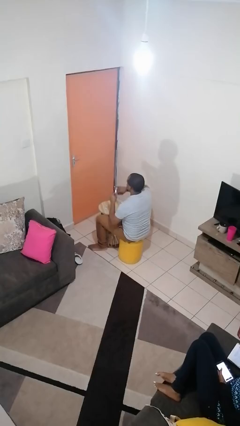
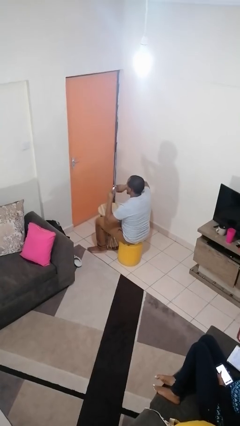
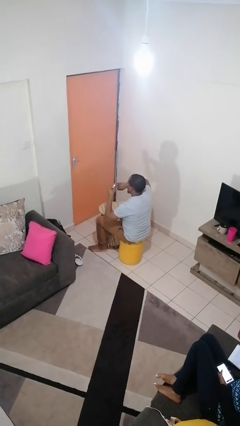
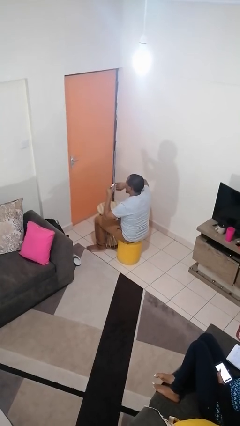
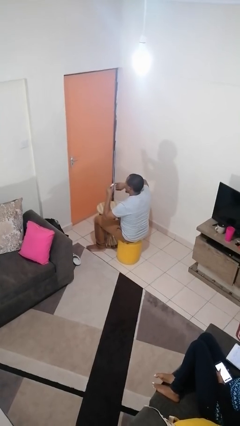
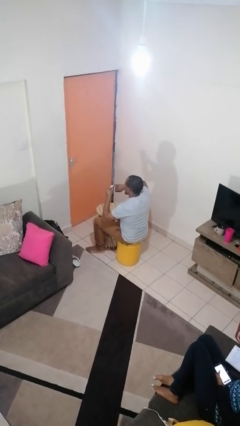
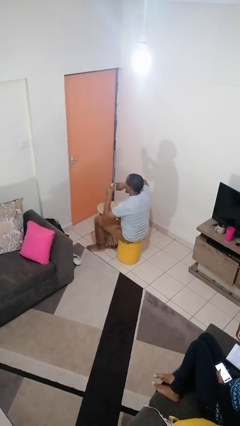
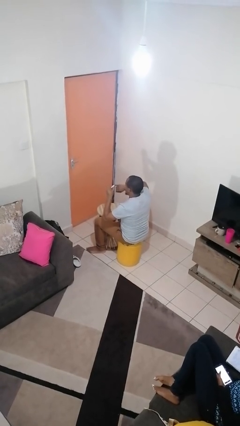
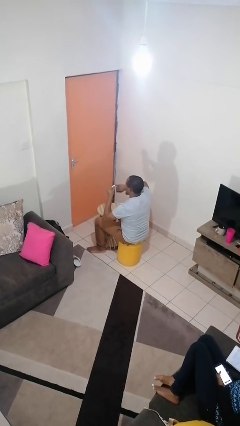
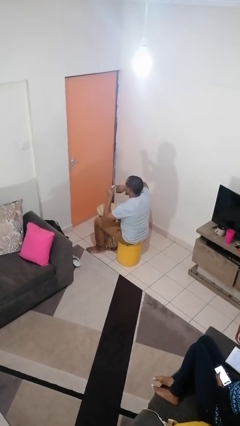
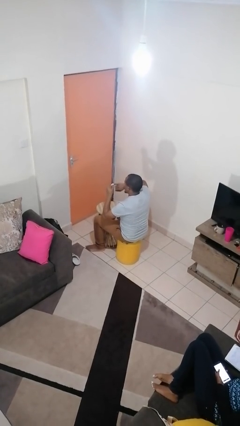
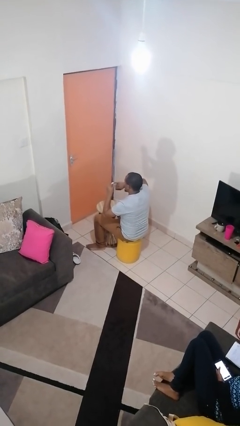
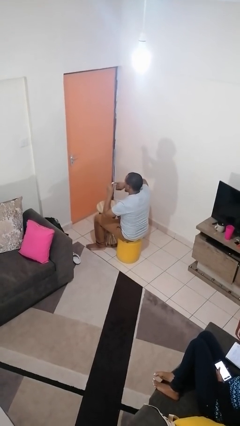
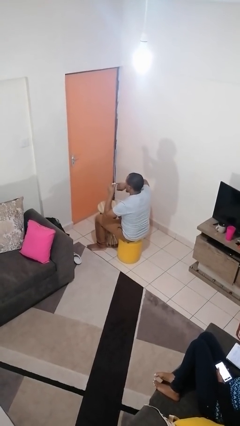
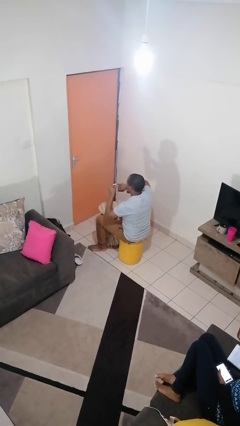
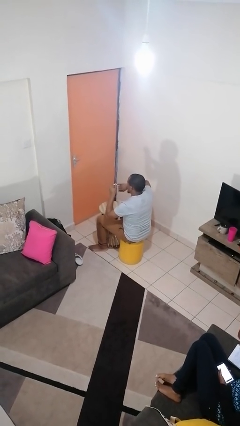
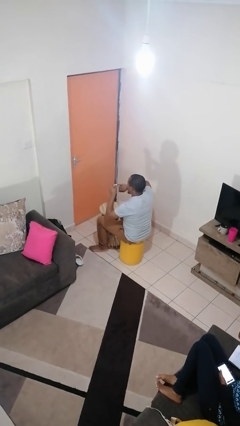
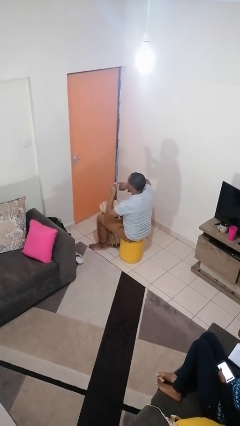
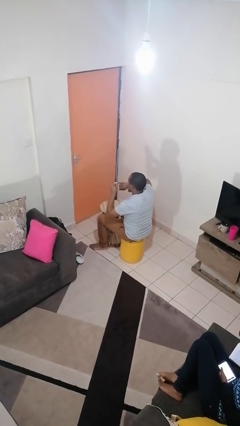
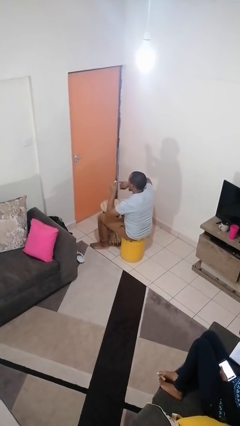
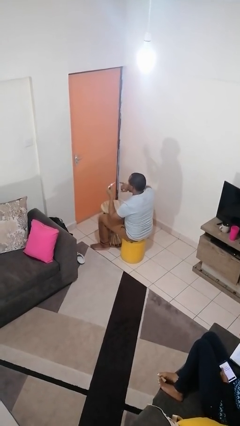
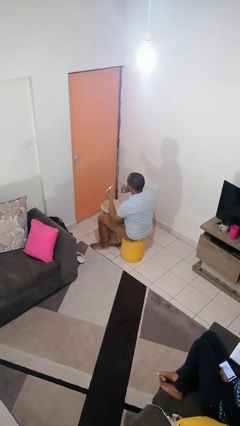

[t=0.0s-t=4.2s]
person paints fingernails

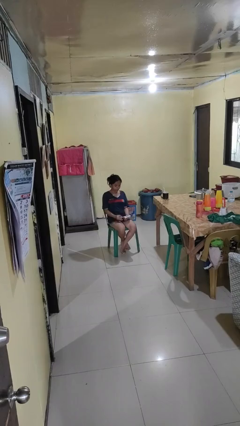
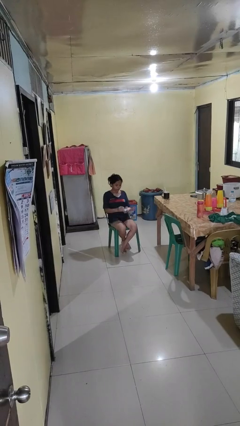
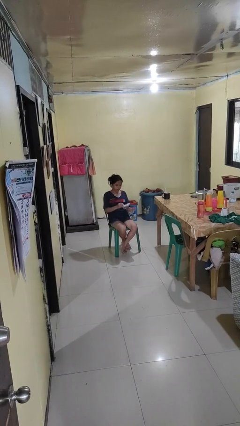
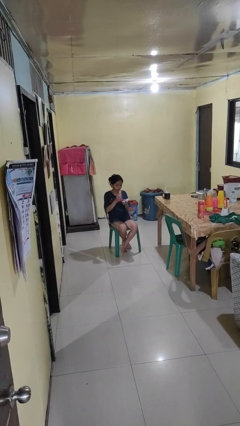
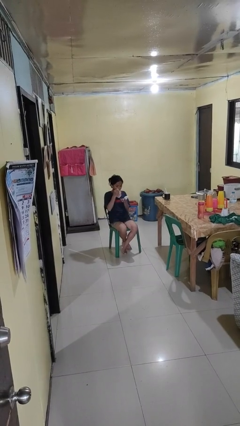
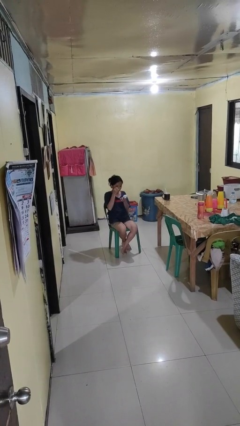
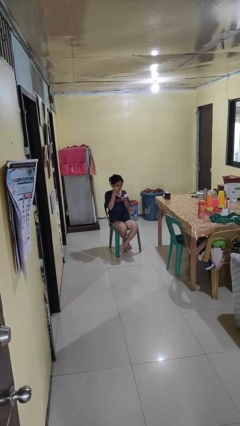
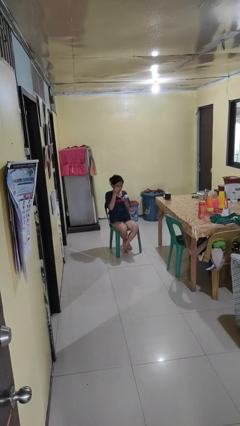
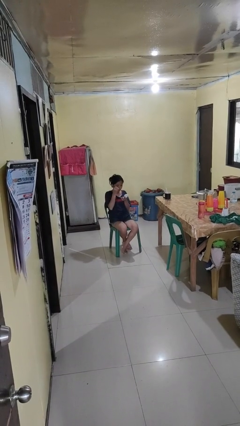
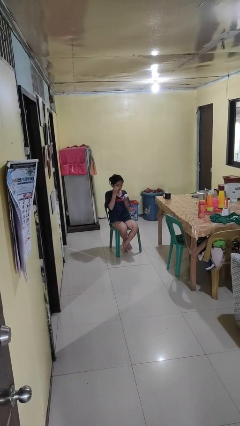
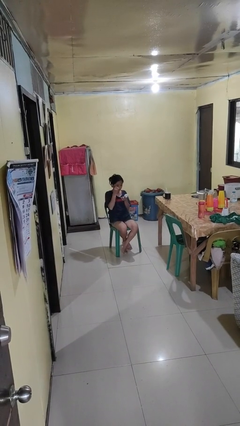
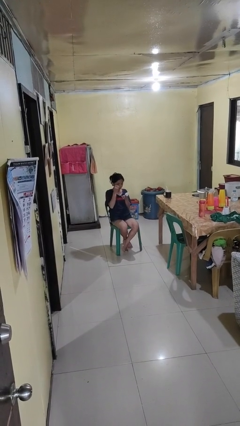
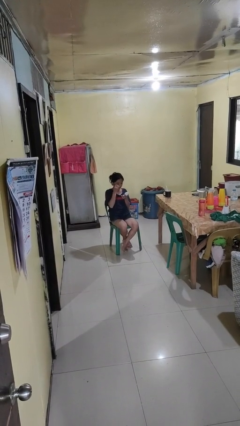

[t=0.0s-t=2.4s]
person applies eye makeup

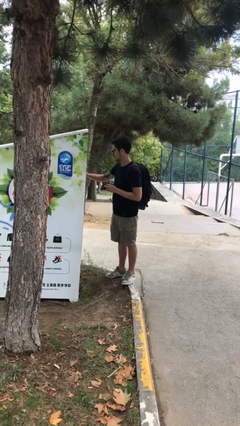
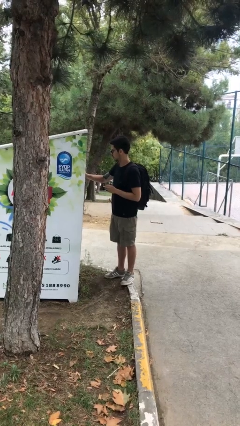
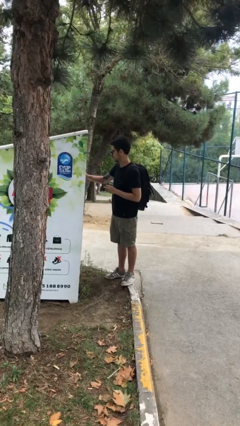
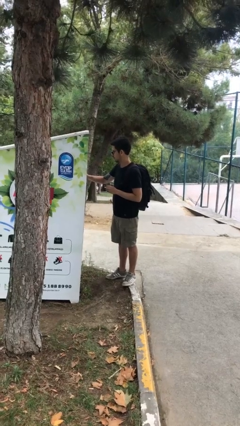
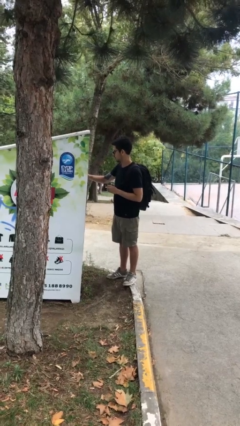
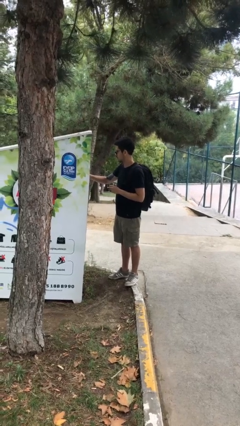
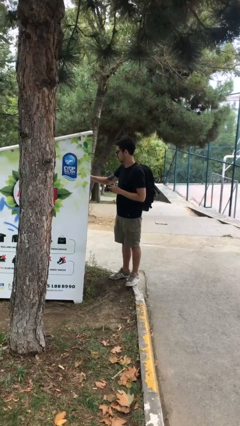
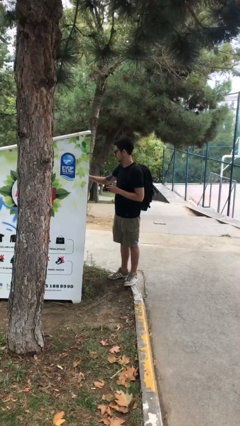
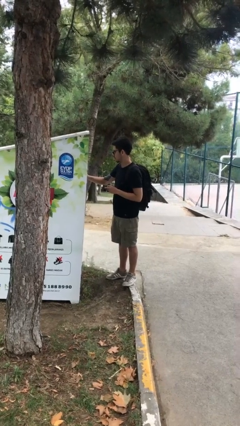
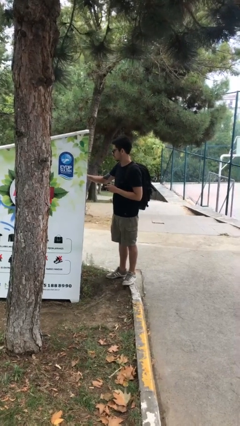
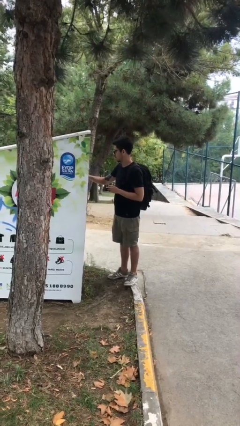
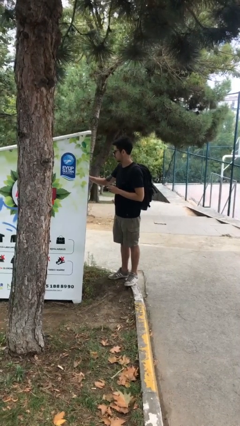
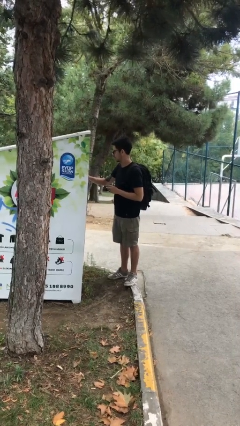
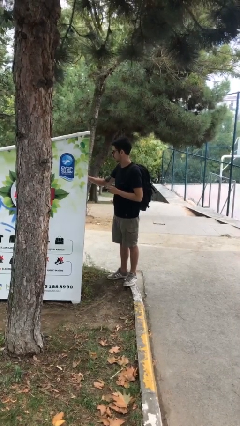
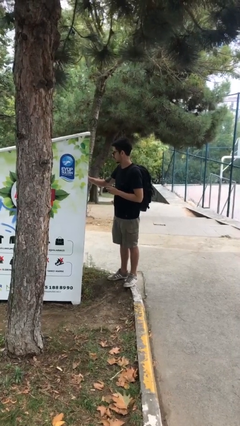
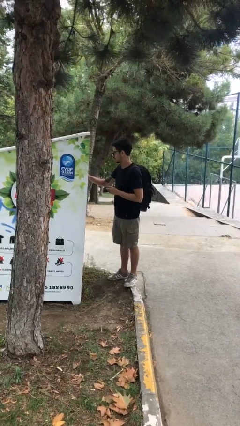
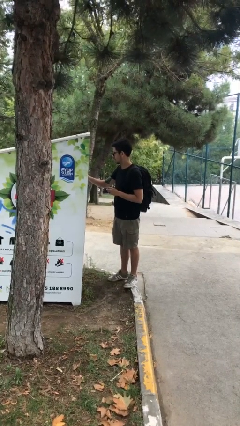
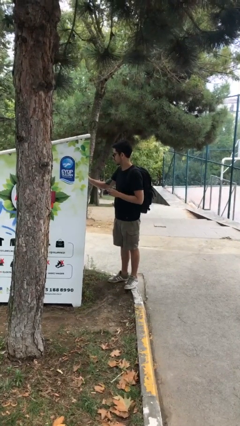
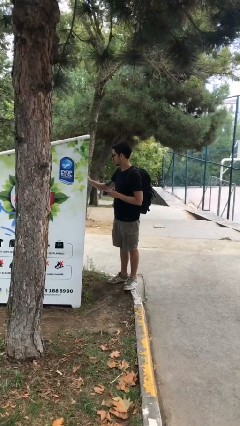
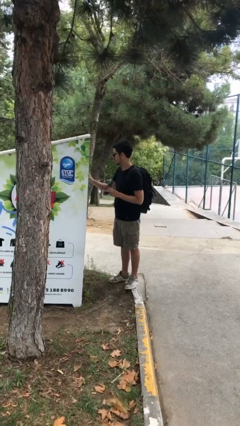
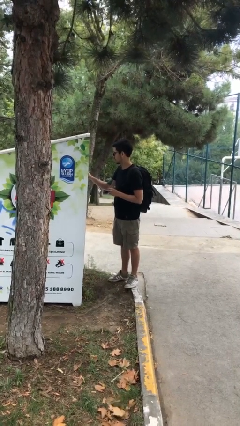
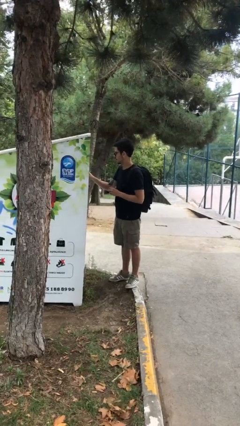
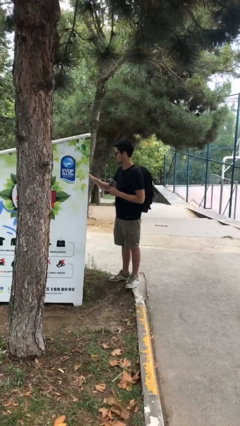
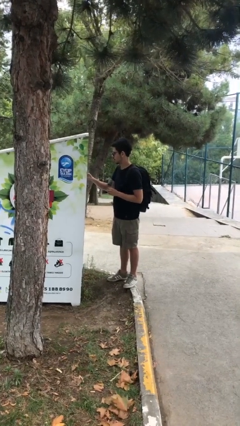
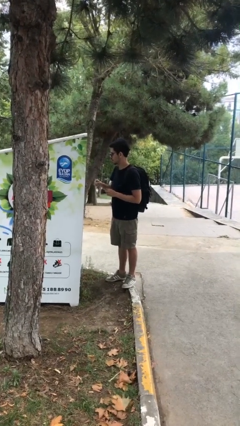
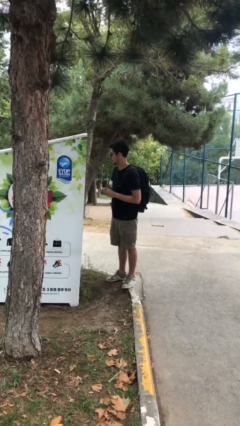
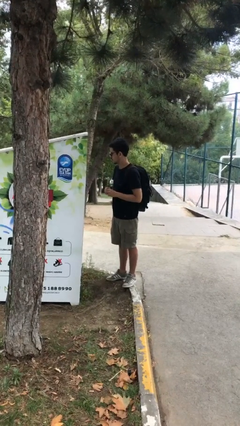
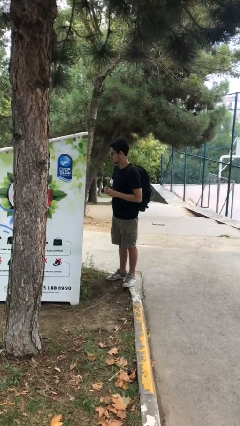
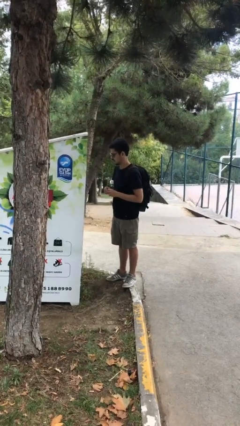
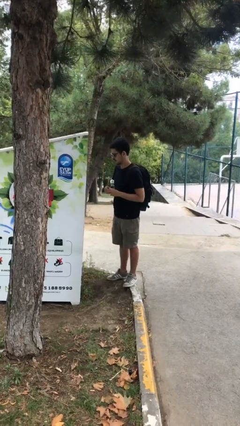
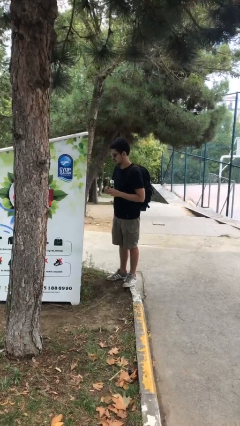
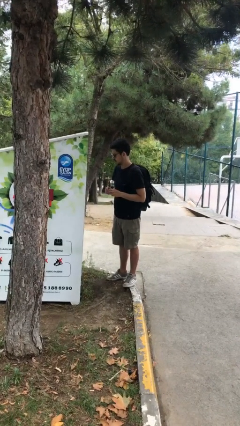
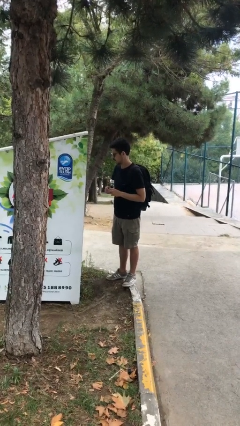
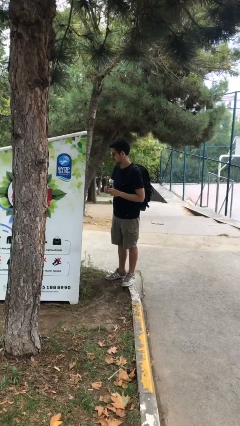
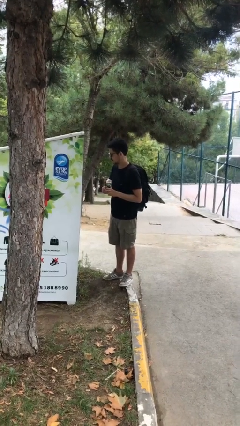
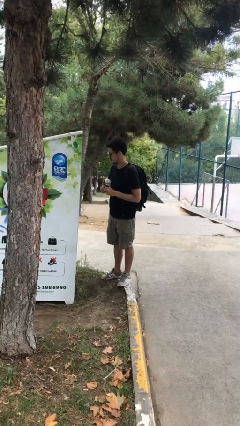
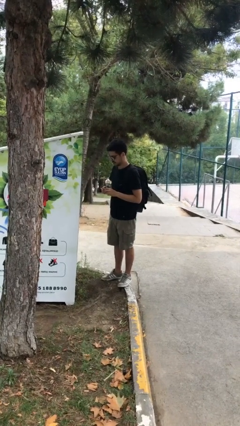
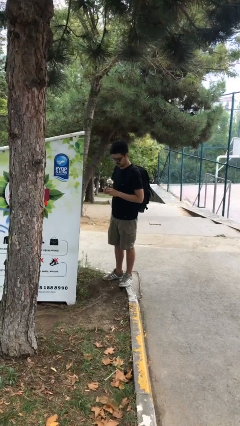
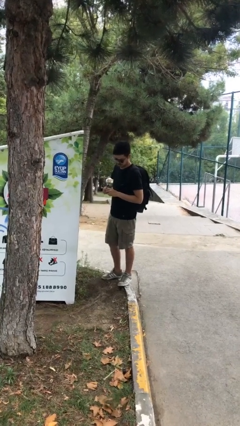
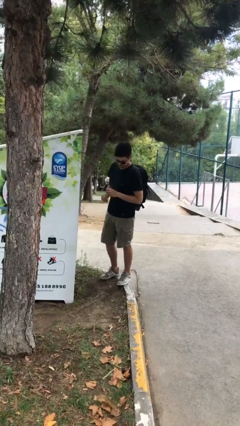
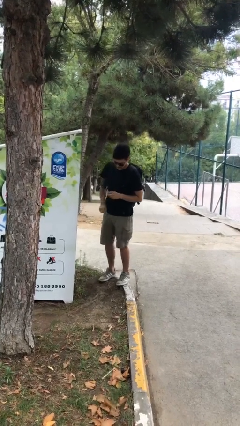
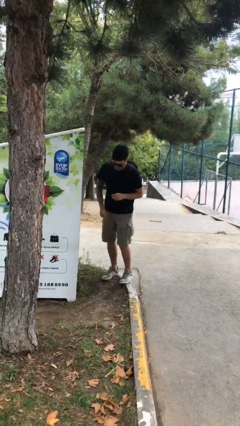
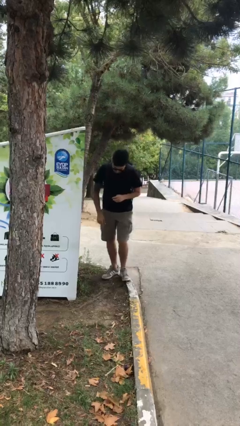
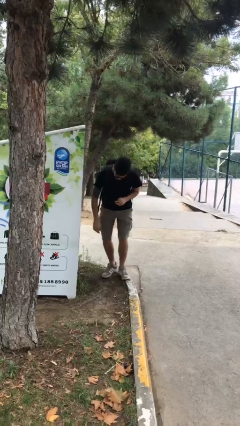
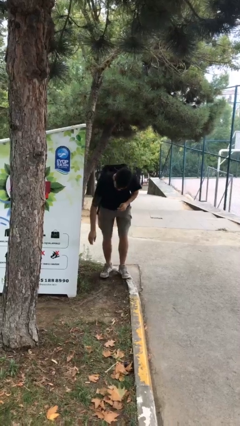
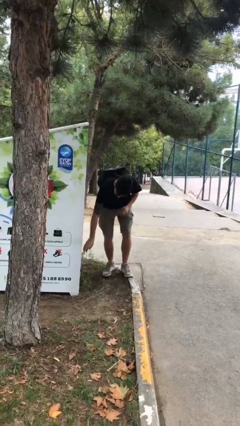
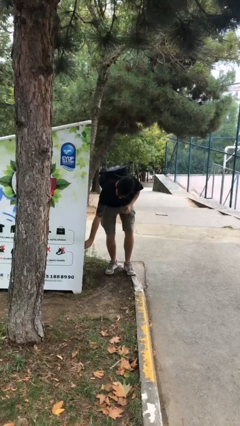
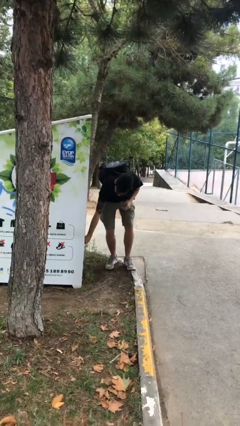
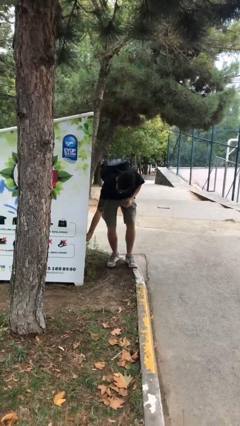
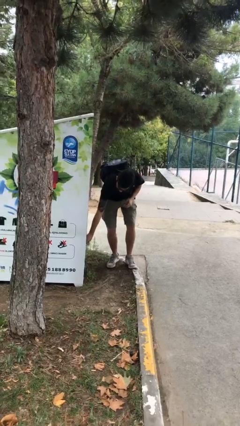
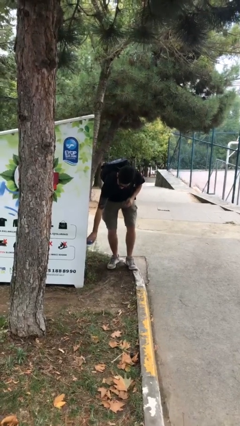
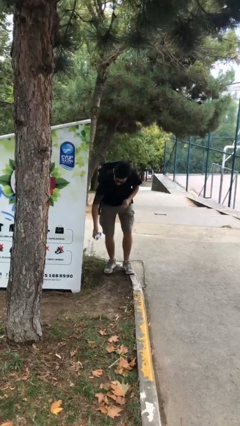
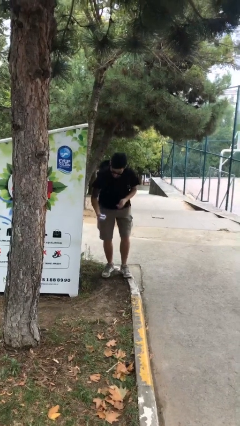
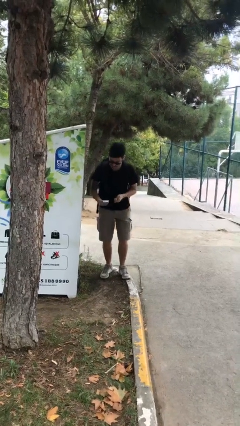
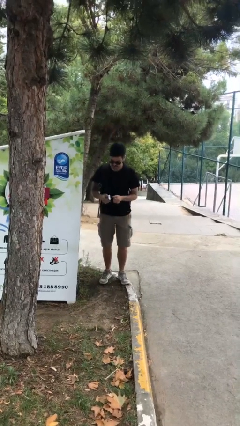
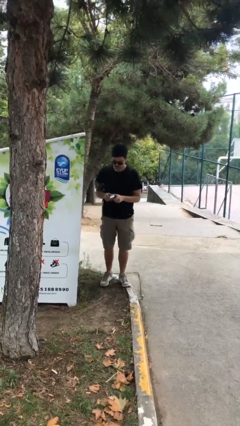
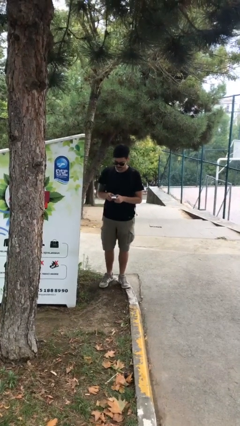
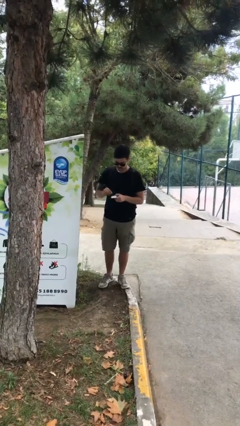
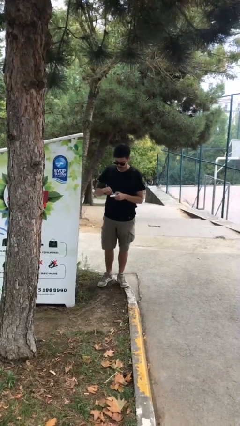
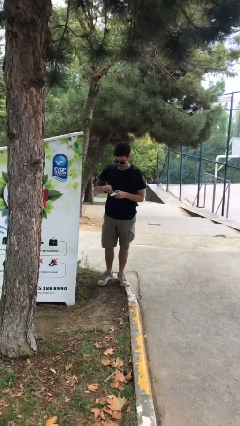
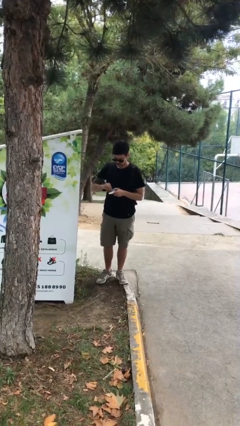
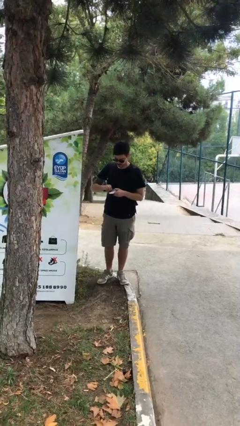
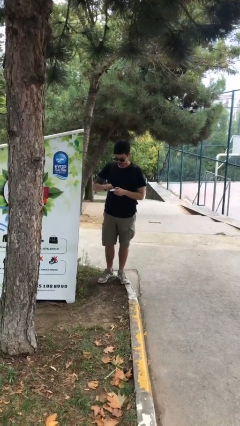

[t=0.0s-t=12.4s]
person purchases from machine
